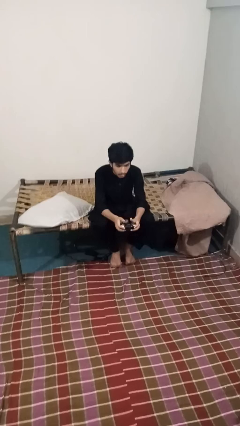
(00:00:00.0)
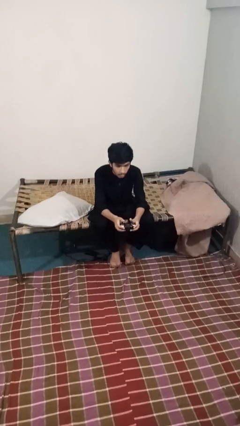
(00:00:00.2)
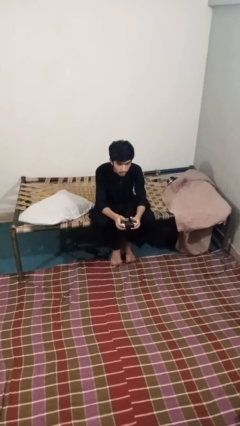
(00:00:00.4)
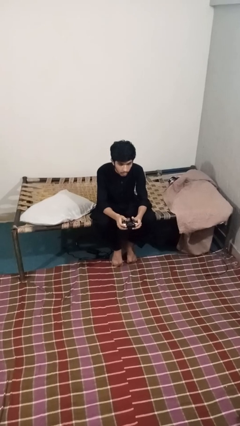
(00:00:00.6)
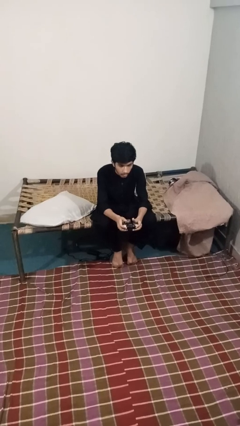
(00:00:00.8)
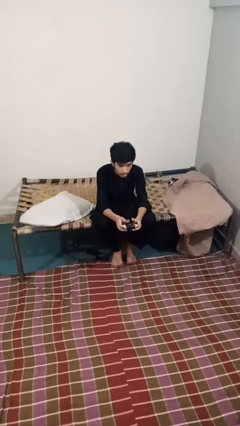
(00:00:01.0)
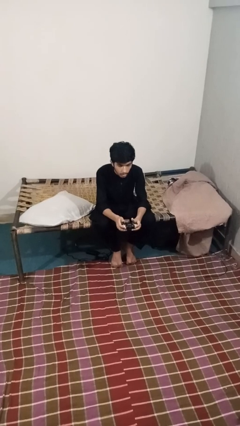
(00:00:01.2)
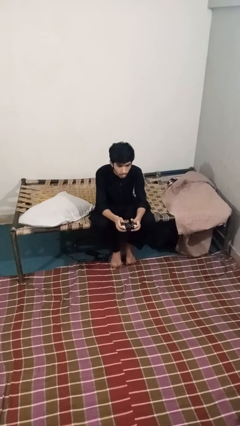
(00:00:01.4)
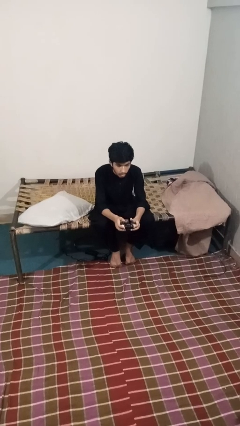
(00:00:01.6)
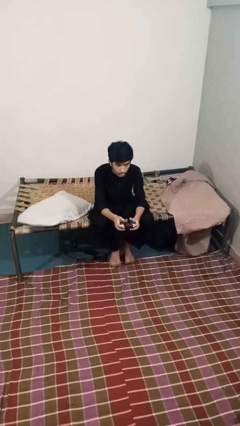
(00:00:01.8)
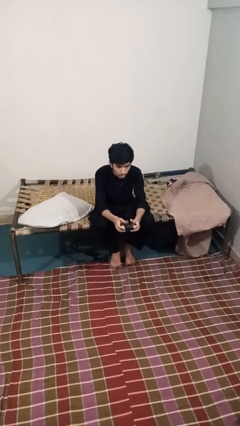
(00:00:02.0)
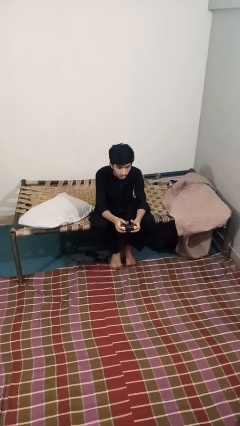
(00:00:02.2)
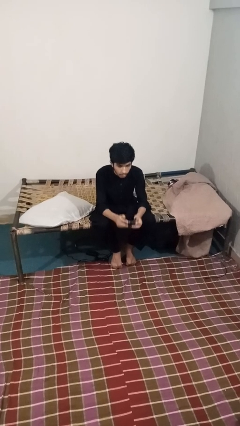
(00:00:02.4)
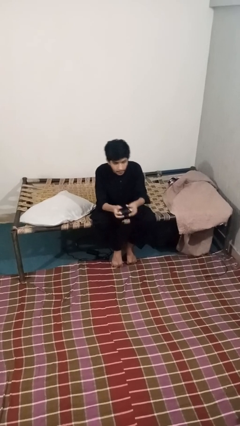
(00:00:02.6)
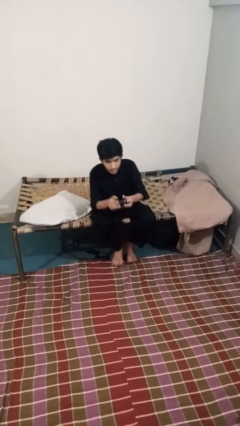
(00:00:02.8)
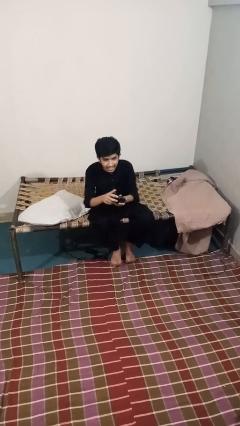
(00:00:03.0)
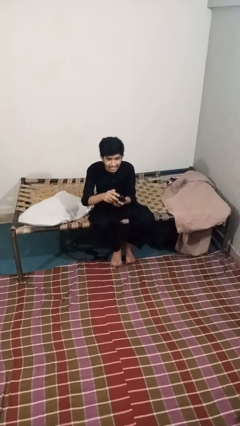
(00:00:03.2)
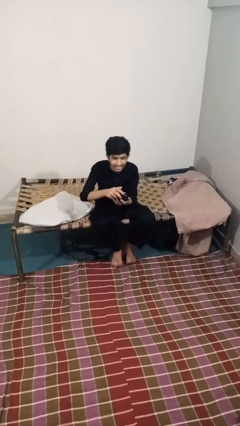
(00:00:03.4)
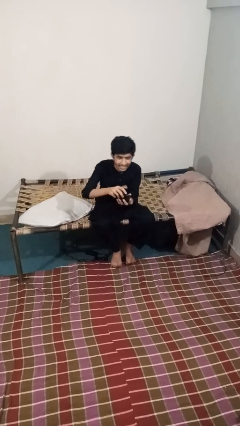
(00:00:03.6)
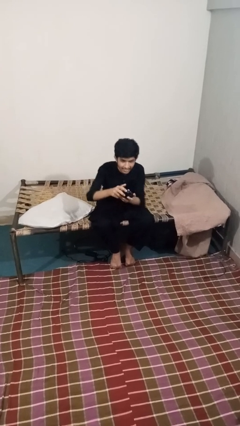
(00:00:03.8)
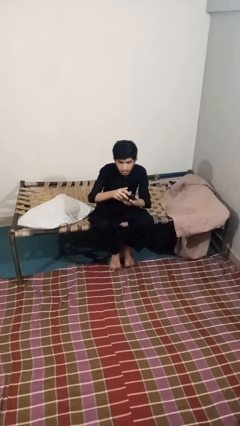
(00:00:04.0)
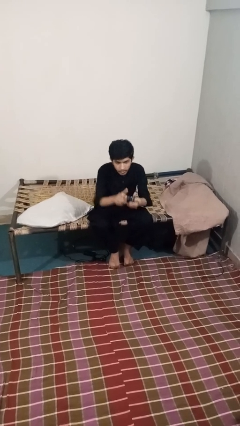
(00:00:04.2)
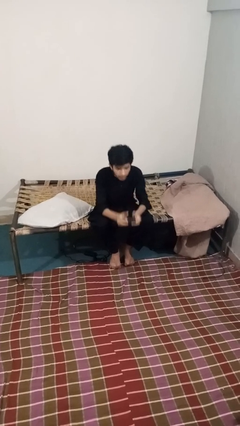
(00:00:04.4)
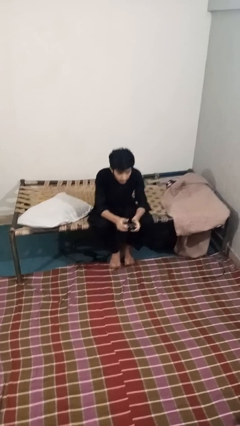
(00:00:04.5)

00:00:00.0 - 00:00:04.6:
person interacts with handheld game

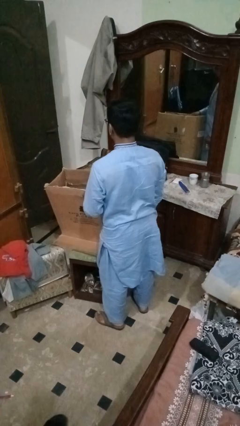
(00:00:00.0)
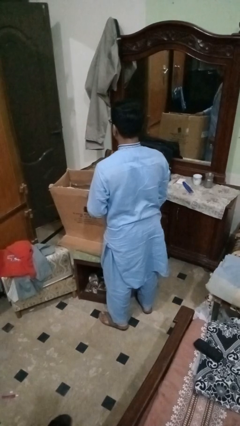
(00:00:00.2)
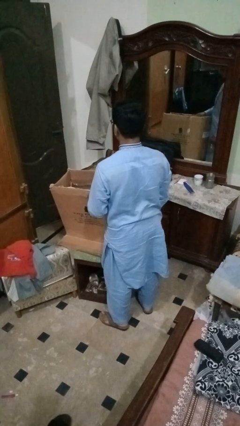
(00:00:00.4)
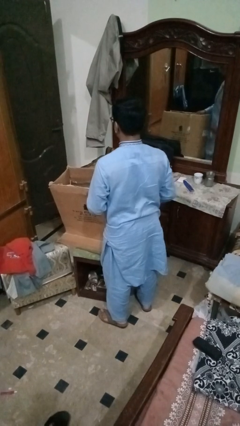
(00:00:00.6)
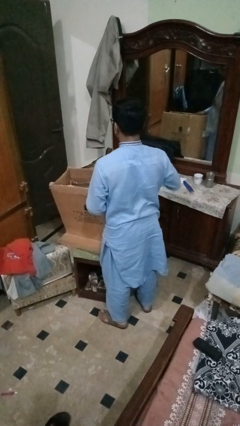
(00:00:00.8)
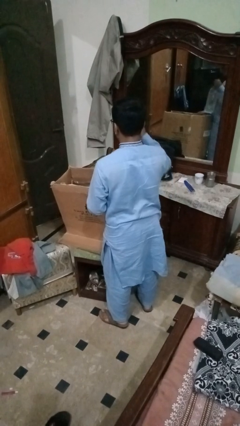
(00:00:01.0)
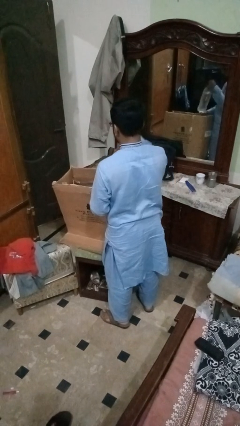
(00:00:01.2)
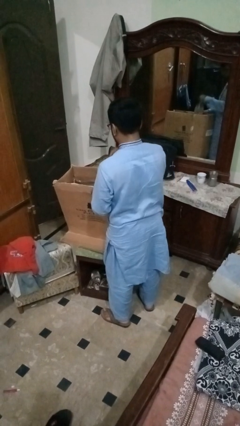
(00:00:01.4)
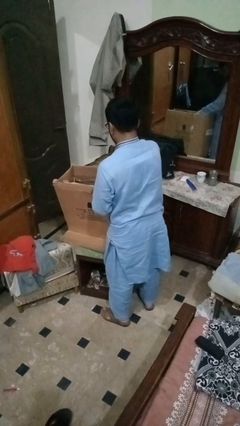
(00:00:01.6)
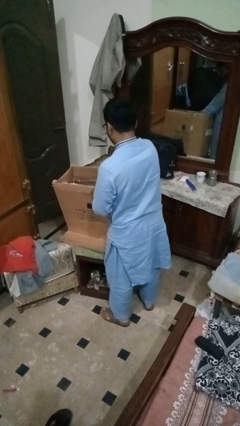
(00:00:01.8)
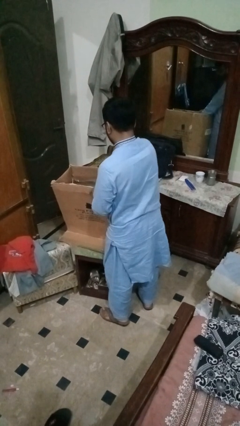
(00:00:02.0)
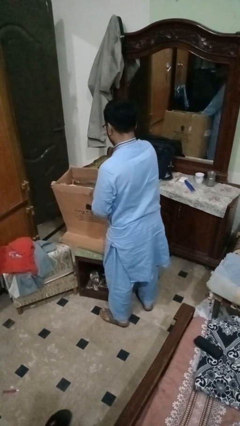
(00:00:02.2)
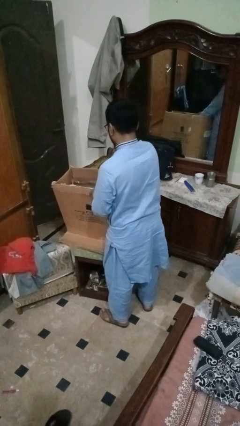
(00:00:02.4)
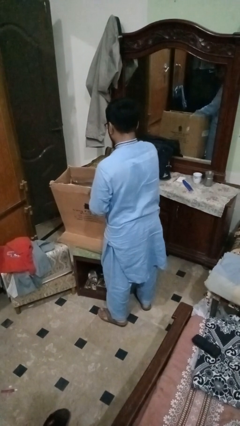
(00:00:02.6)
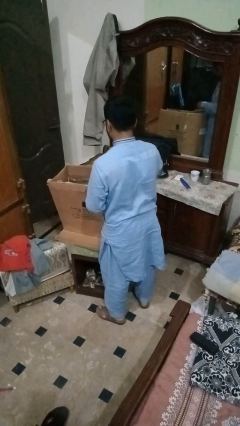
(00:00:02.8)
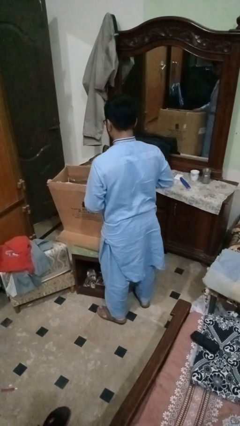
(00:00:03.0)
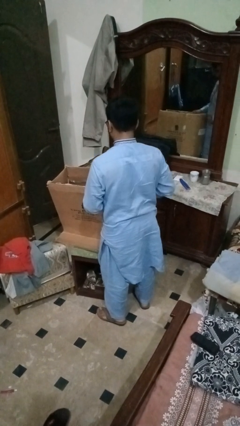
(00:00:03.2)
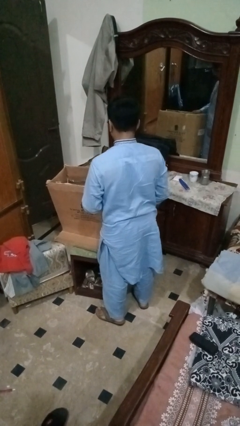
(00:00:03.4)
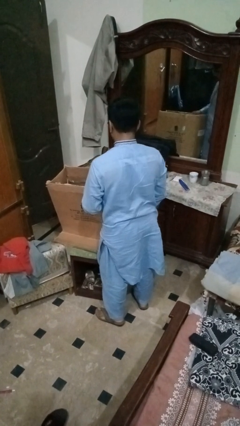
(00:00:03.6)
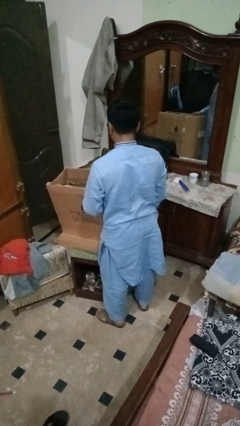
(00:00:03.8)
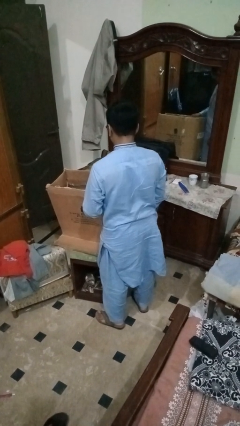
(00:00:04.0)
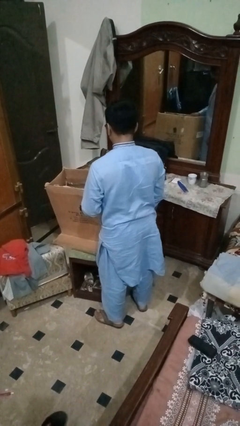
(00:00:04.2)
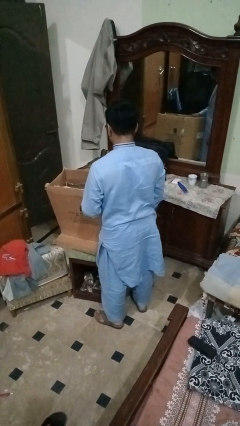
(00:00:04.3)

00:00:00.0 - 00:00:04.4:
person puts object into box

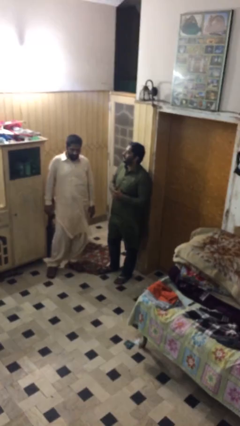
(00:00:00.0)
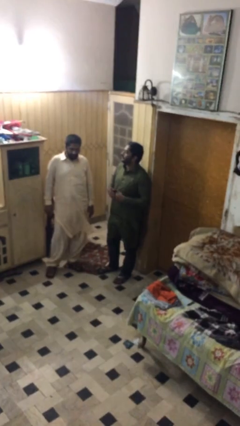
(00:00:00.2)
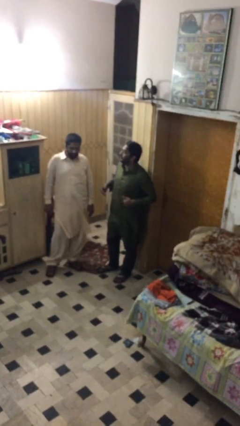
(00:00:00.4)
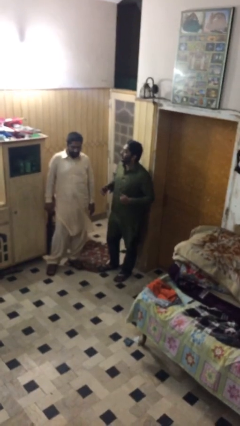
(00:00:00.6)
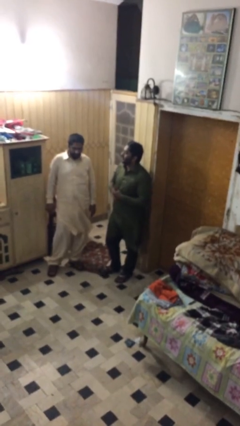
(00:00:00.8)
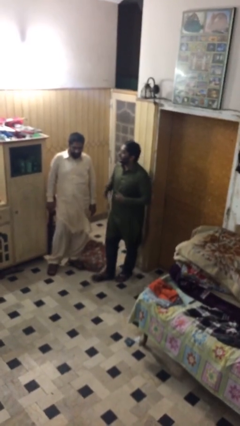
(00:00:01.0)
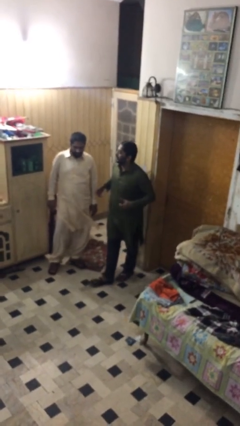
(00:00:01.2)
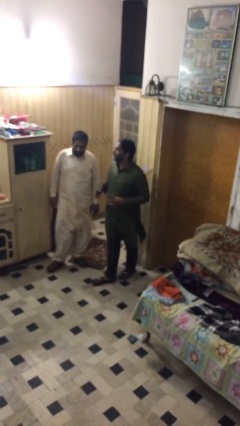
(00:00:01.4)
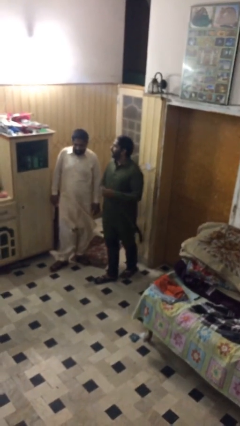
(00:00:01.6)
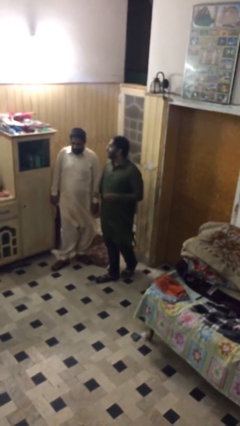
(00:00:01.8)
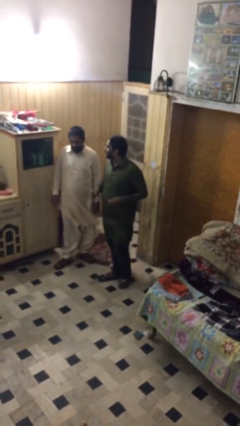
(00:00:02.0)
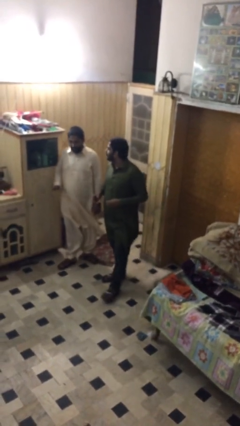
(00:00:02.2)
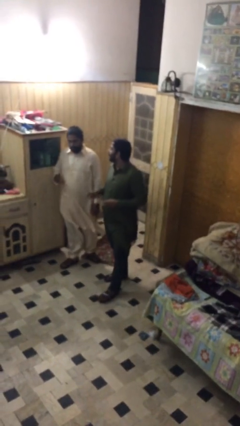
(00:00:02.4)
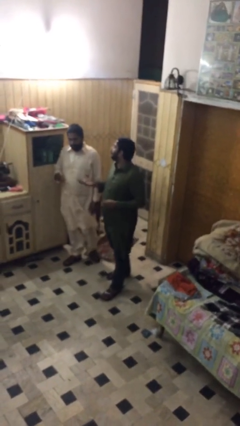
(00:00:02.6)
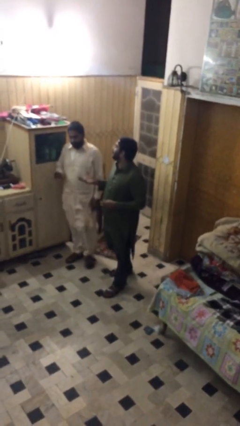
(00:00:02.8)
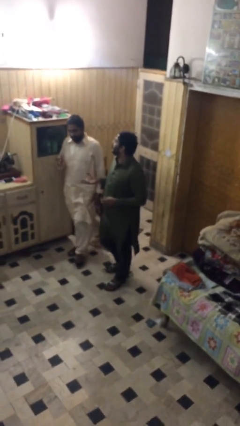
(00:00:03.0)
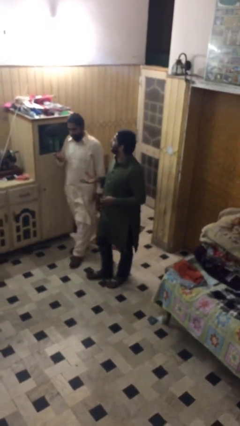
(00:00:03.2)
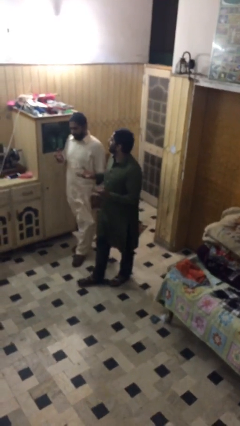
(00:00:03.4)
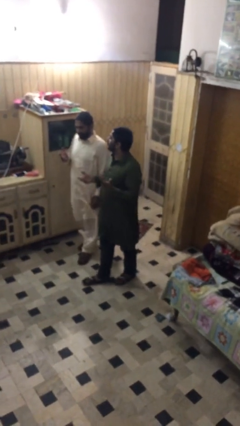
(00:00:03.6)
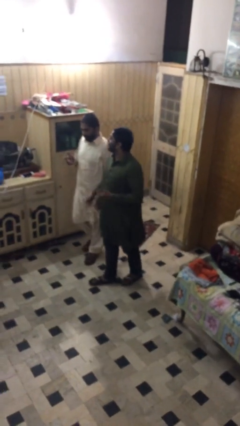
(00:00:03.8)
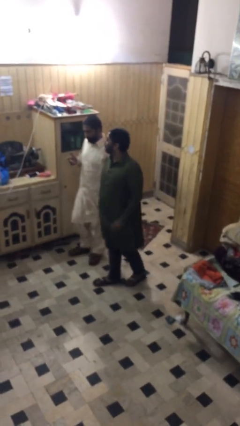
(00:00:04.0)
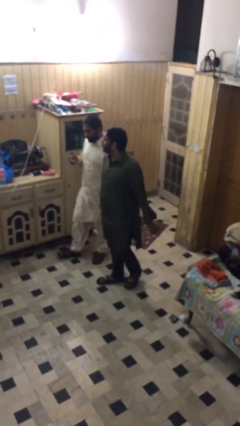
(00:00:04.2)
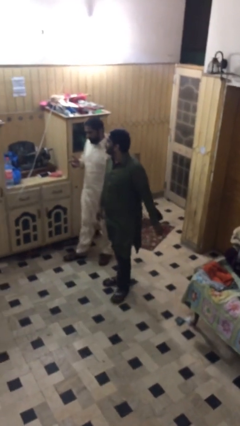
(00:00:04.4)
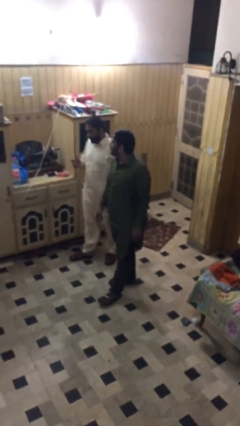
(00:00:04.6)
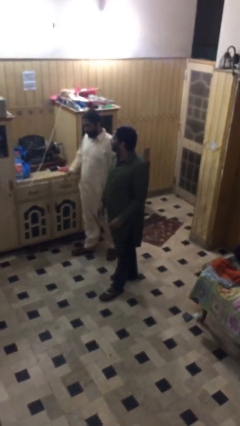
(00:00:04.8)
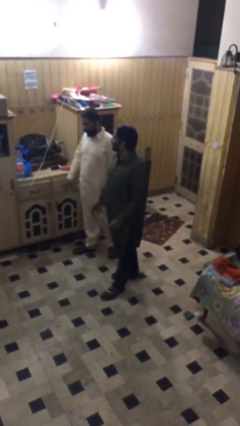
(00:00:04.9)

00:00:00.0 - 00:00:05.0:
person talks to person

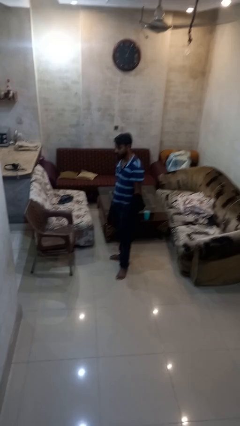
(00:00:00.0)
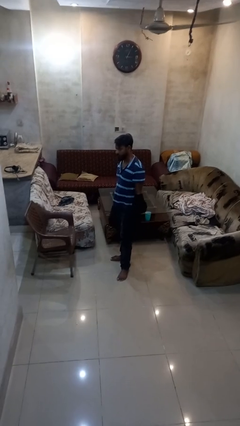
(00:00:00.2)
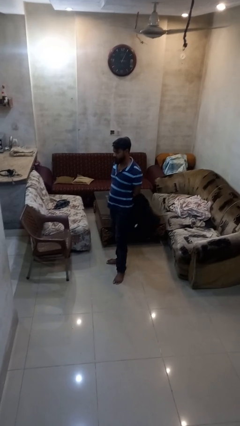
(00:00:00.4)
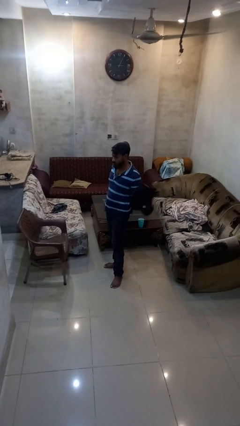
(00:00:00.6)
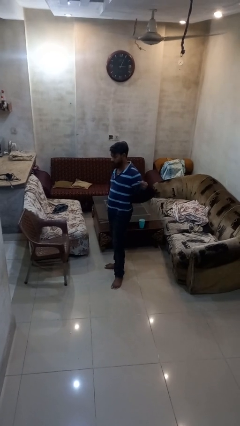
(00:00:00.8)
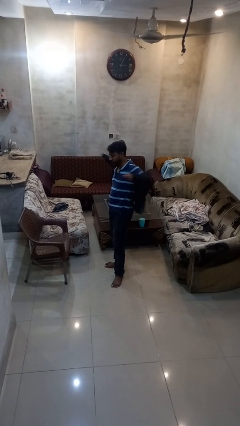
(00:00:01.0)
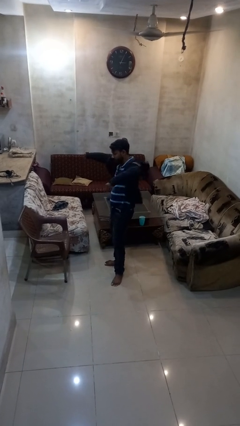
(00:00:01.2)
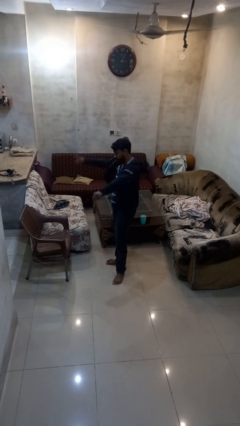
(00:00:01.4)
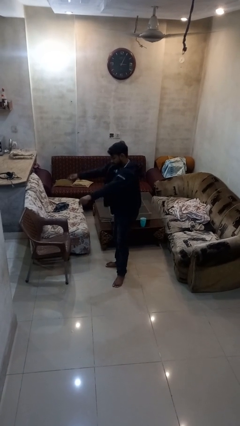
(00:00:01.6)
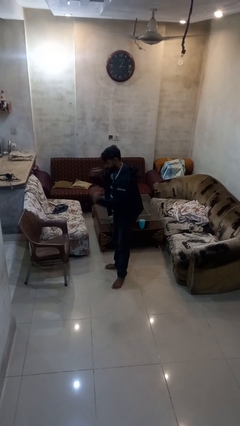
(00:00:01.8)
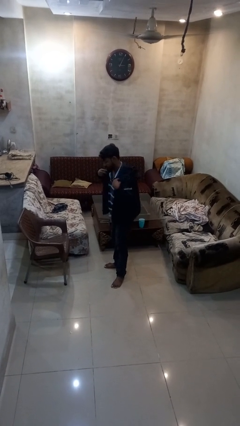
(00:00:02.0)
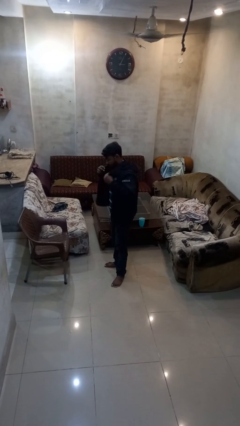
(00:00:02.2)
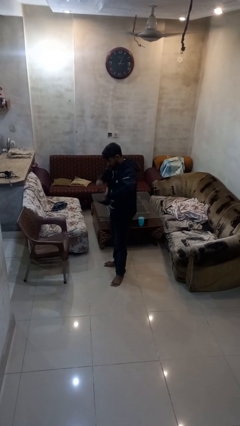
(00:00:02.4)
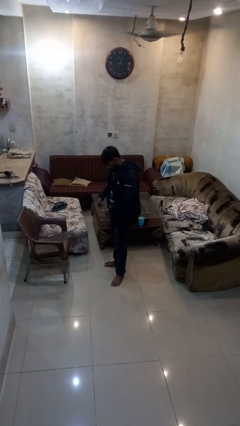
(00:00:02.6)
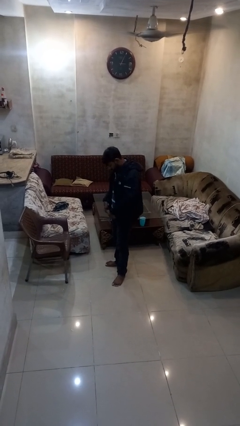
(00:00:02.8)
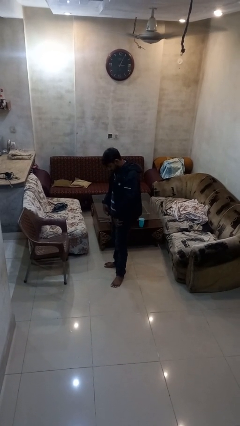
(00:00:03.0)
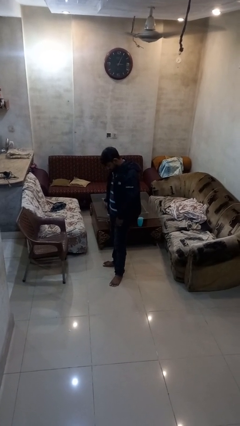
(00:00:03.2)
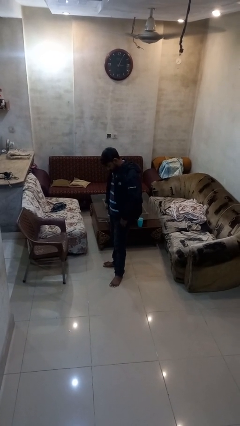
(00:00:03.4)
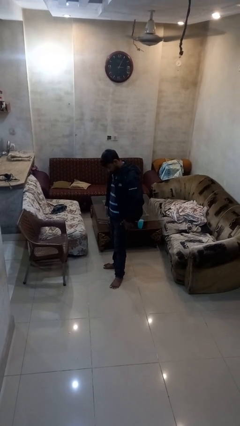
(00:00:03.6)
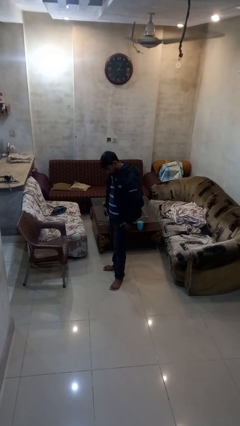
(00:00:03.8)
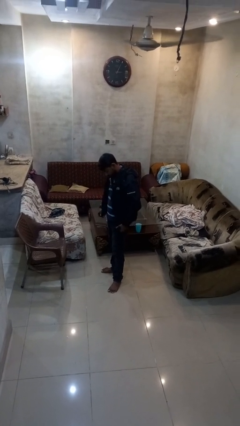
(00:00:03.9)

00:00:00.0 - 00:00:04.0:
person puts on jacket
